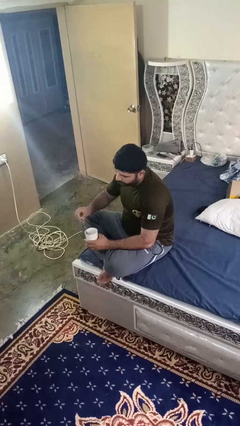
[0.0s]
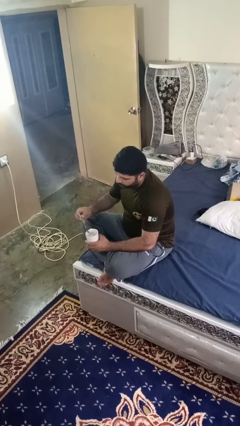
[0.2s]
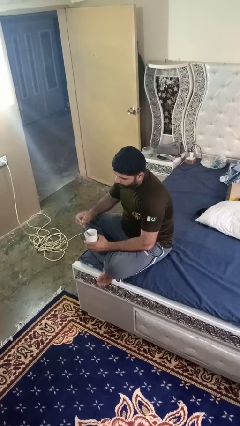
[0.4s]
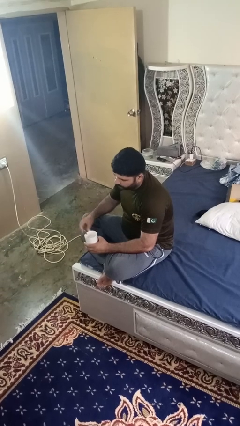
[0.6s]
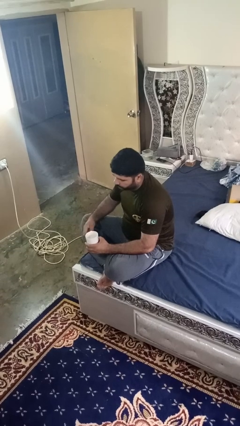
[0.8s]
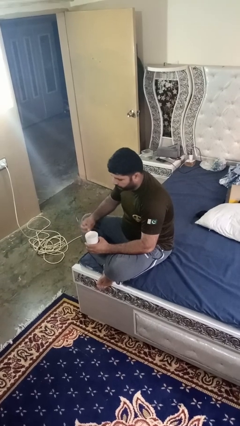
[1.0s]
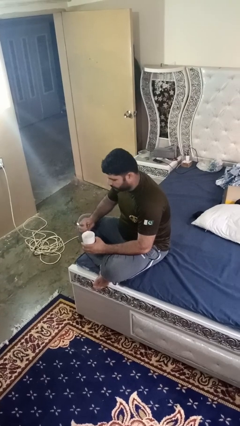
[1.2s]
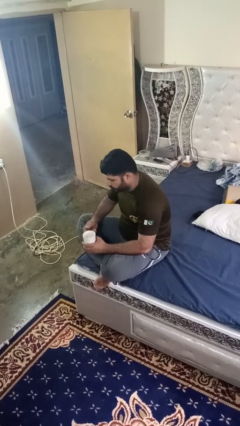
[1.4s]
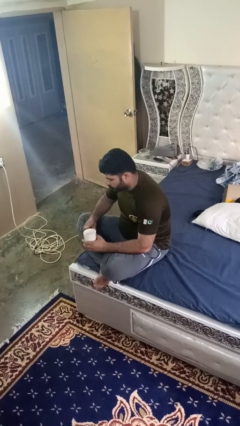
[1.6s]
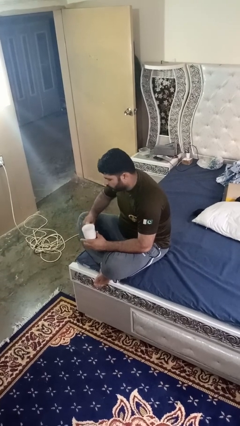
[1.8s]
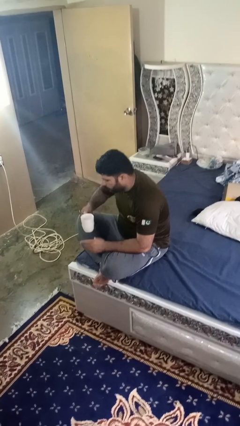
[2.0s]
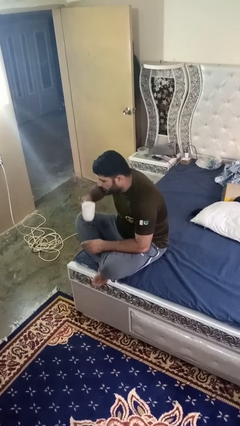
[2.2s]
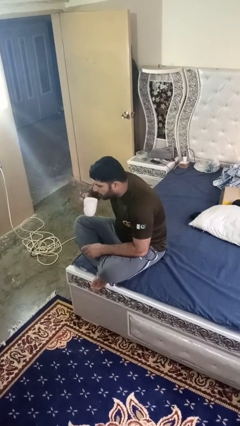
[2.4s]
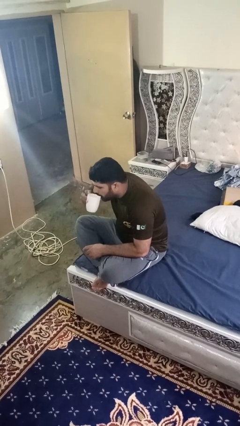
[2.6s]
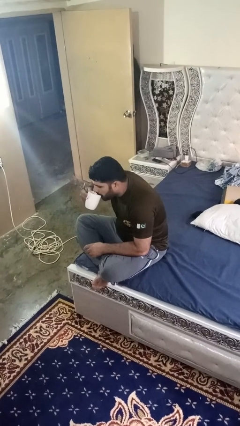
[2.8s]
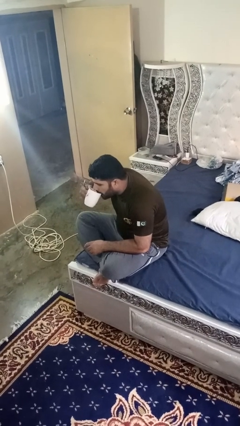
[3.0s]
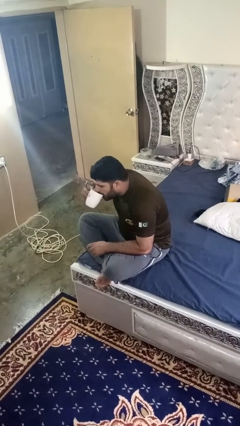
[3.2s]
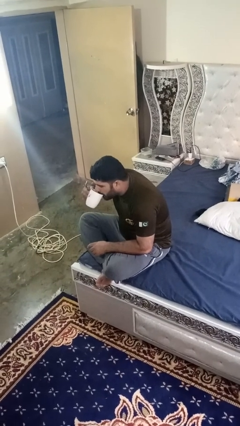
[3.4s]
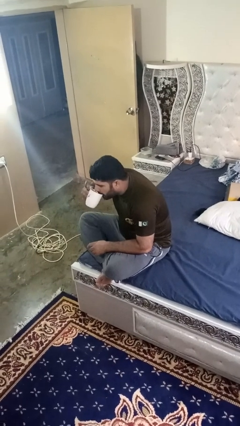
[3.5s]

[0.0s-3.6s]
person drinks from mug

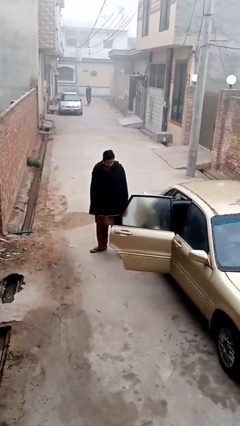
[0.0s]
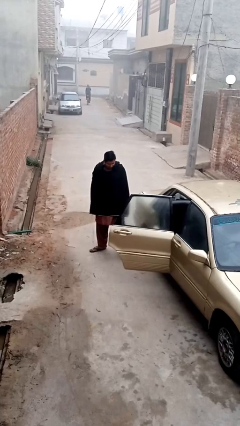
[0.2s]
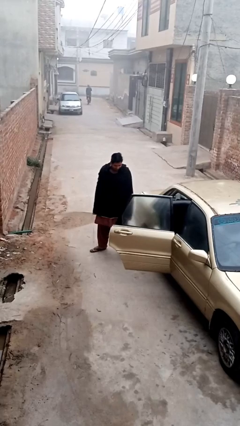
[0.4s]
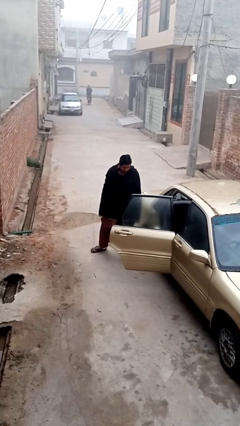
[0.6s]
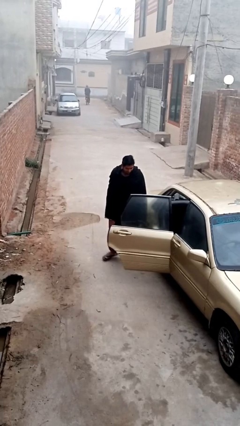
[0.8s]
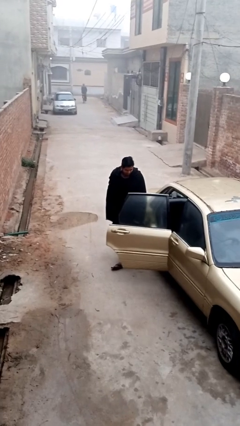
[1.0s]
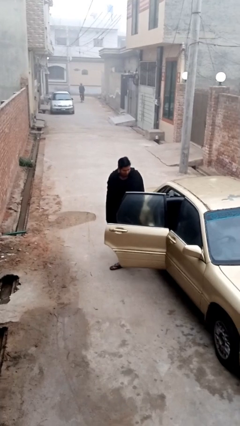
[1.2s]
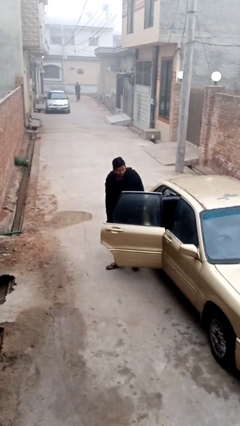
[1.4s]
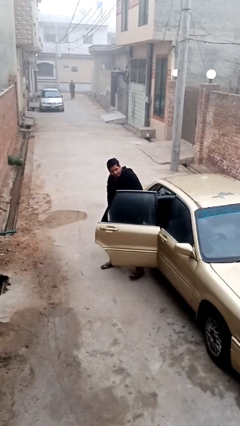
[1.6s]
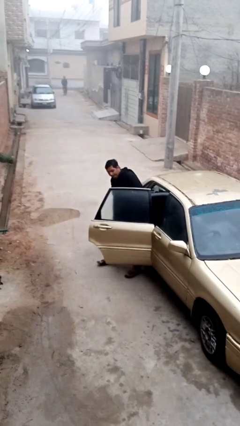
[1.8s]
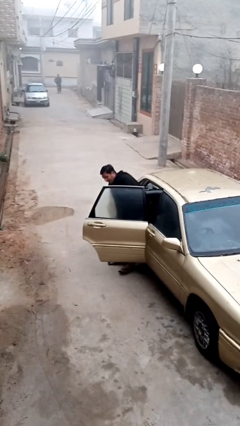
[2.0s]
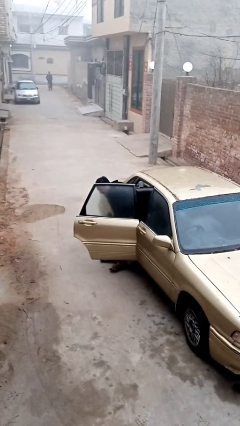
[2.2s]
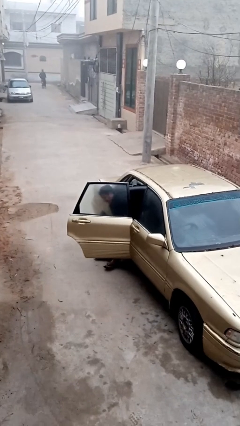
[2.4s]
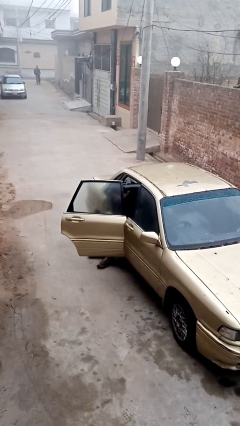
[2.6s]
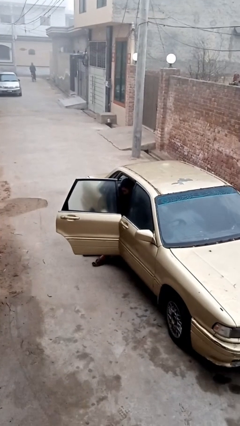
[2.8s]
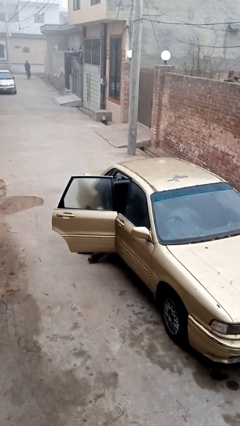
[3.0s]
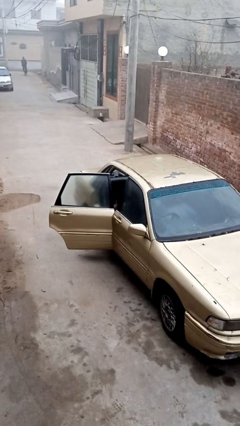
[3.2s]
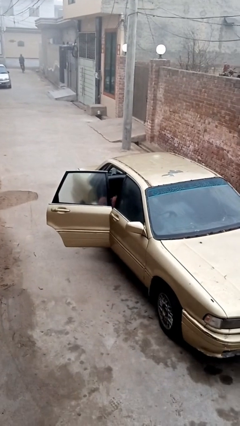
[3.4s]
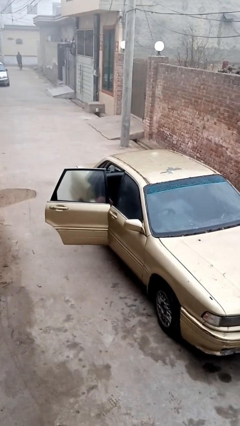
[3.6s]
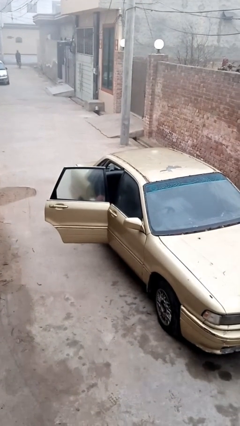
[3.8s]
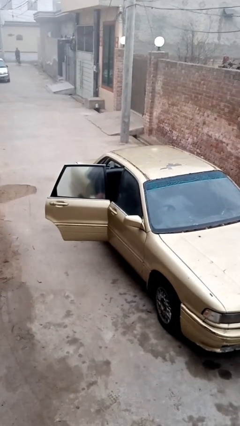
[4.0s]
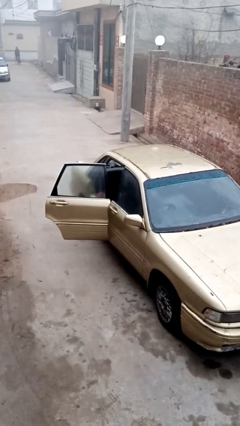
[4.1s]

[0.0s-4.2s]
person enters car

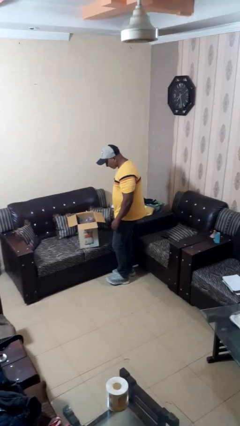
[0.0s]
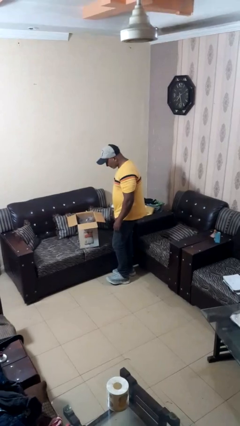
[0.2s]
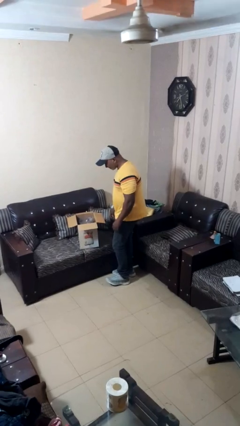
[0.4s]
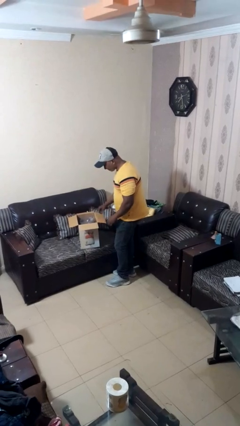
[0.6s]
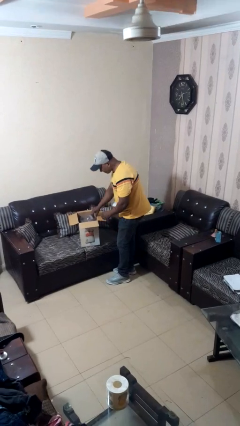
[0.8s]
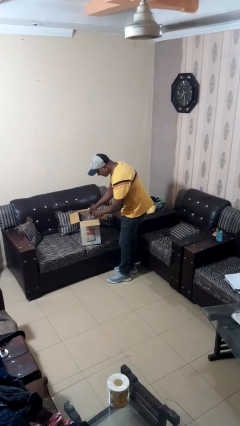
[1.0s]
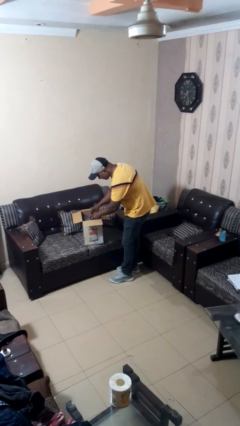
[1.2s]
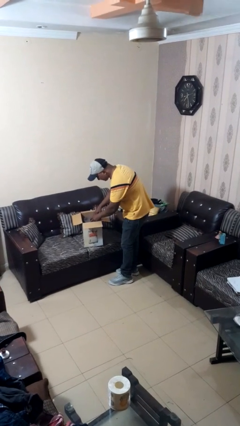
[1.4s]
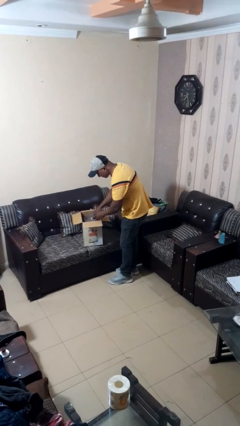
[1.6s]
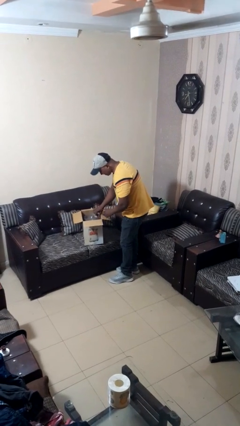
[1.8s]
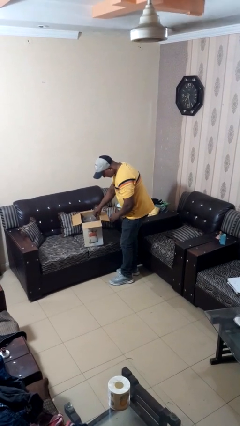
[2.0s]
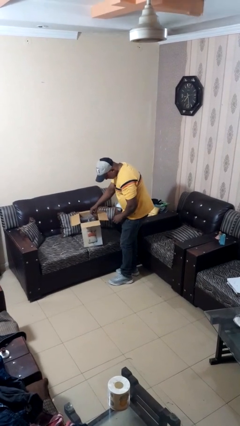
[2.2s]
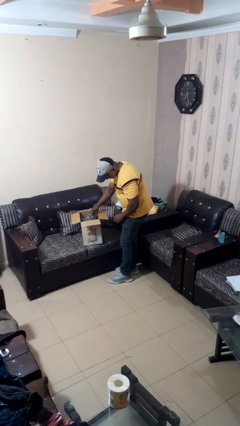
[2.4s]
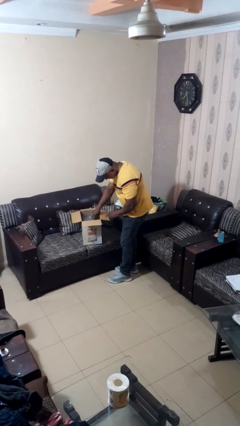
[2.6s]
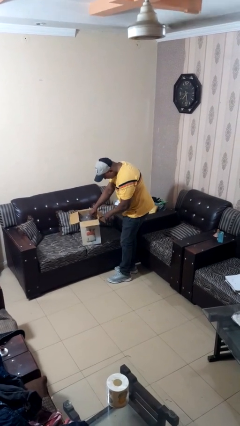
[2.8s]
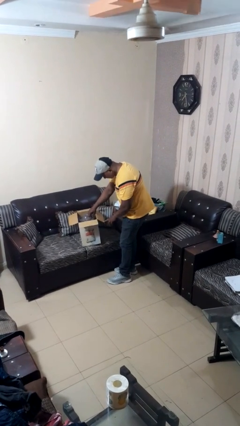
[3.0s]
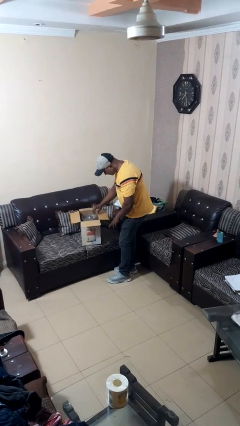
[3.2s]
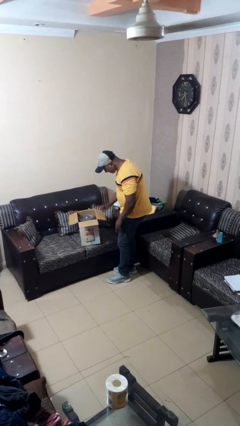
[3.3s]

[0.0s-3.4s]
person searches in box

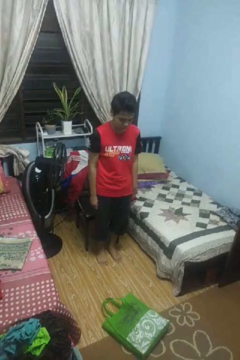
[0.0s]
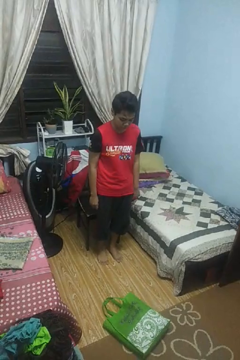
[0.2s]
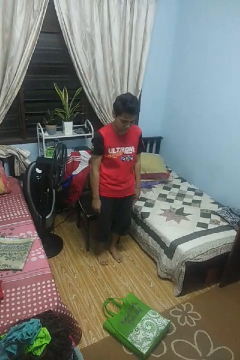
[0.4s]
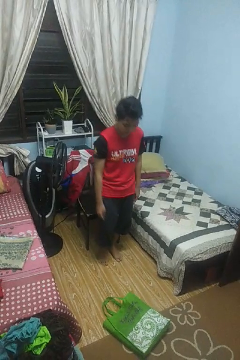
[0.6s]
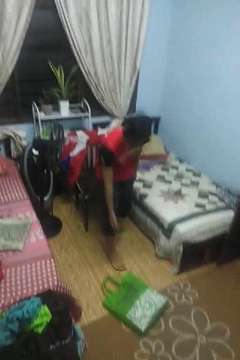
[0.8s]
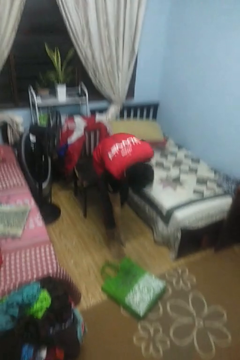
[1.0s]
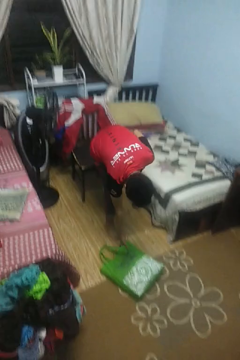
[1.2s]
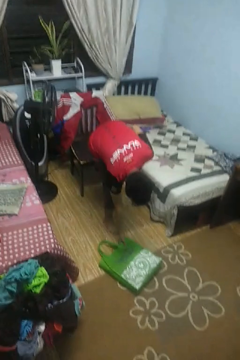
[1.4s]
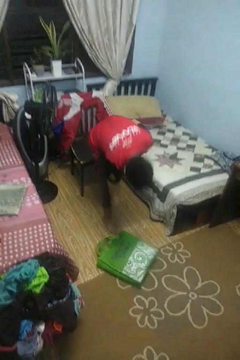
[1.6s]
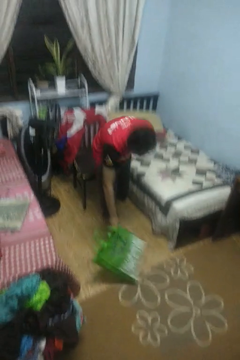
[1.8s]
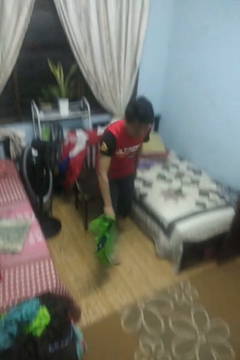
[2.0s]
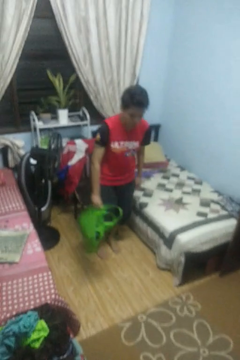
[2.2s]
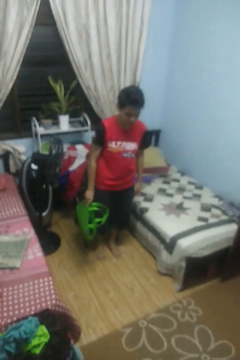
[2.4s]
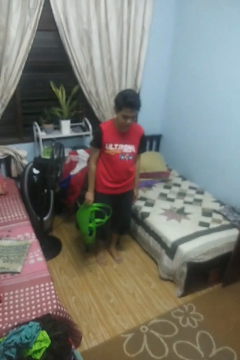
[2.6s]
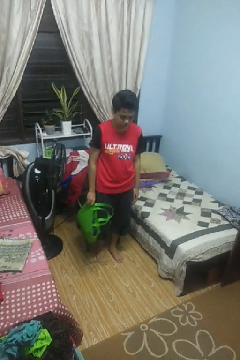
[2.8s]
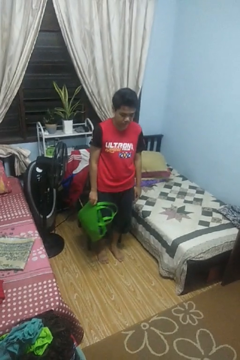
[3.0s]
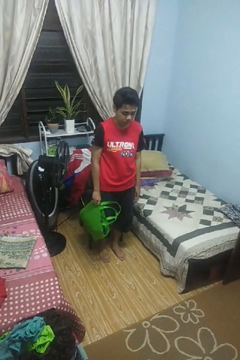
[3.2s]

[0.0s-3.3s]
person picks up object from floor

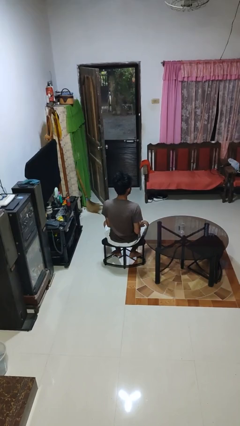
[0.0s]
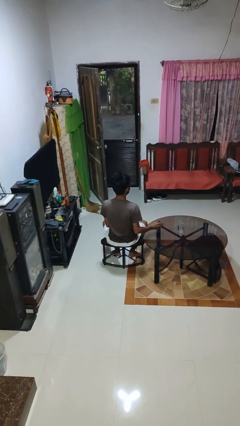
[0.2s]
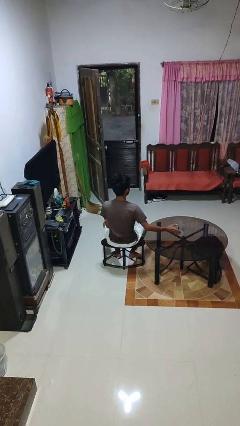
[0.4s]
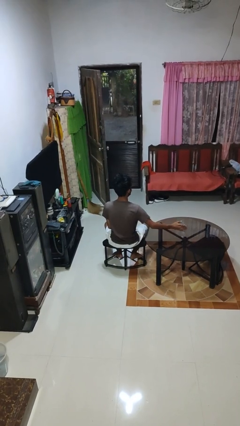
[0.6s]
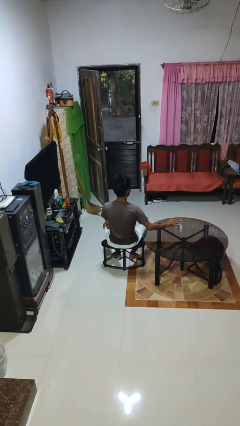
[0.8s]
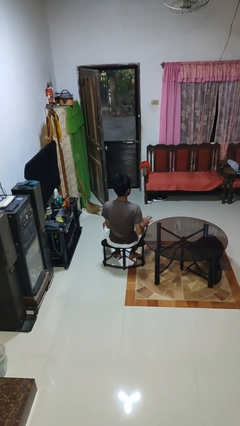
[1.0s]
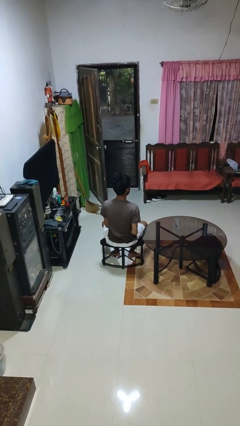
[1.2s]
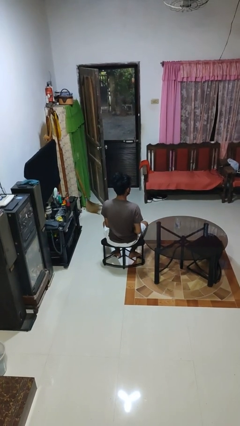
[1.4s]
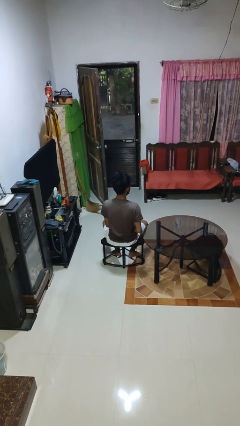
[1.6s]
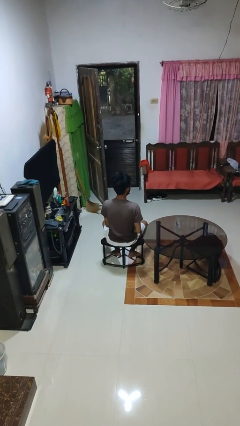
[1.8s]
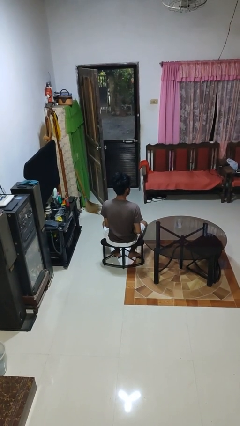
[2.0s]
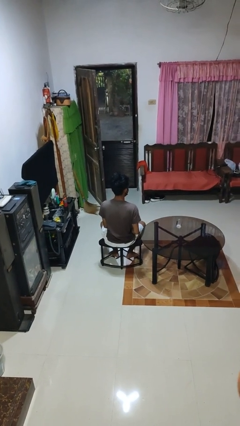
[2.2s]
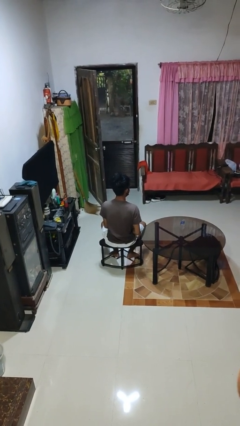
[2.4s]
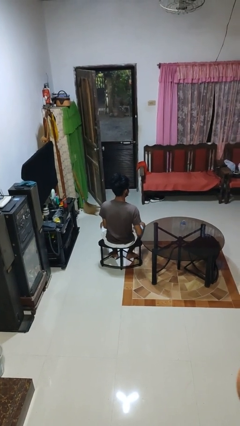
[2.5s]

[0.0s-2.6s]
person knocks over glass

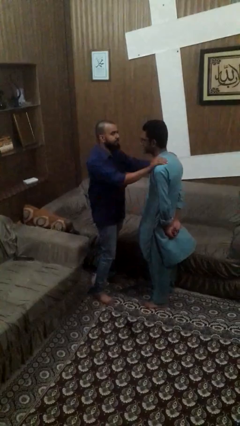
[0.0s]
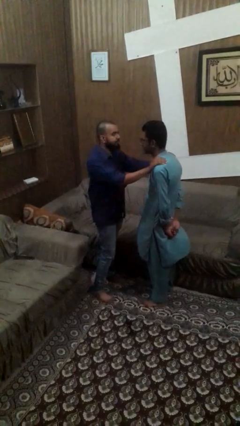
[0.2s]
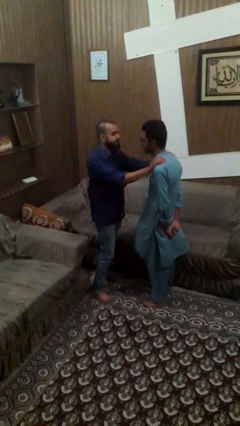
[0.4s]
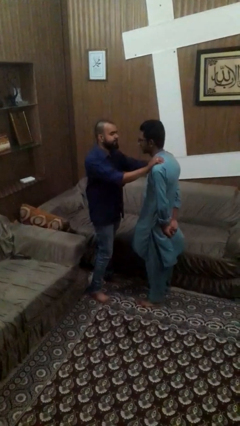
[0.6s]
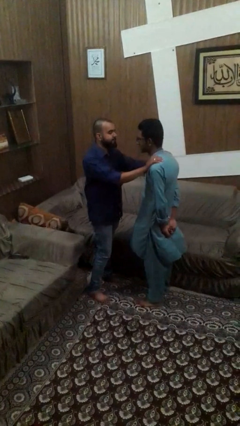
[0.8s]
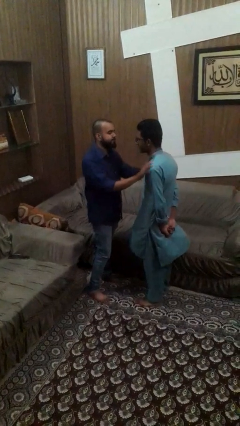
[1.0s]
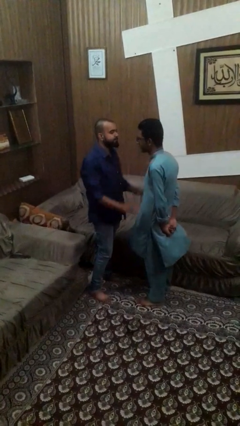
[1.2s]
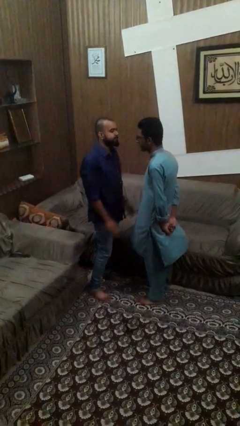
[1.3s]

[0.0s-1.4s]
person pounds shoulders of person
